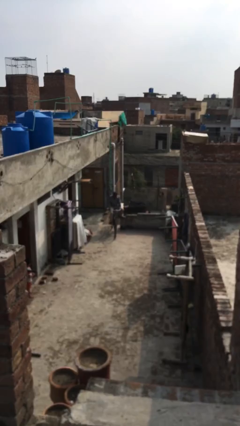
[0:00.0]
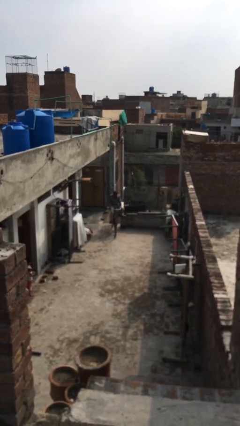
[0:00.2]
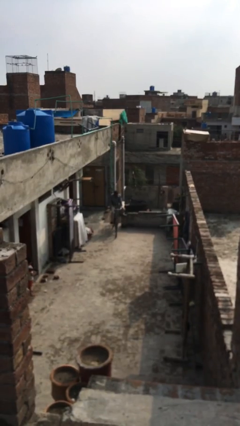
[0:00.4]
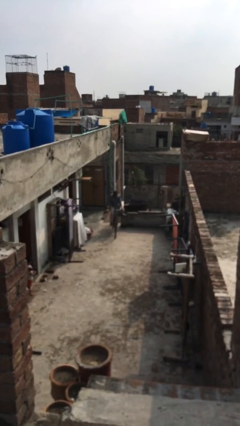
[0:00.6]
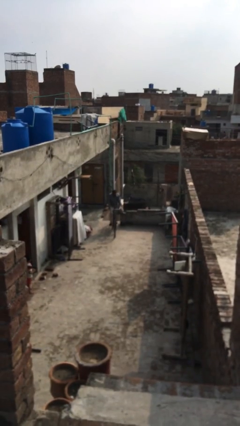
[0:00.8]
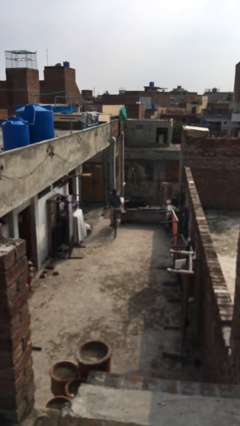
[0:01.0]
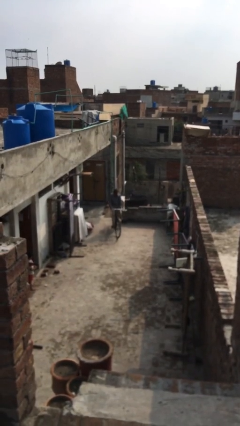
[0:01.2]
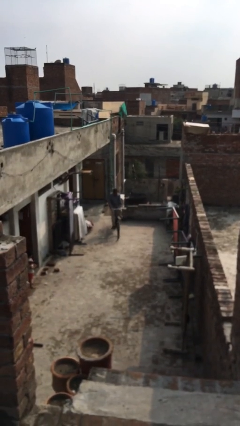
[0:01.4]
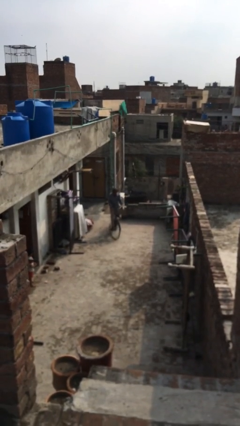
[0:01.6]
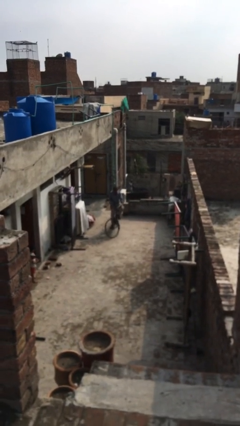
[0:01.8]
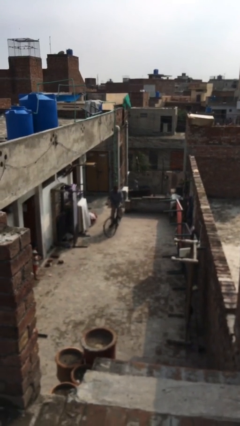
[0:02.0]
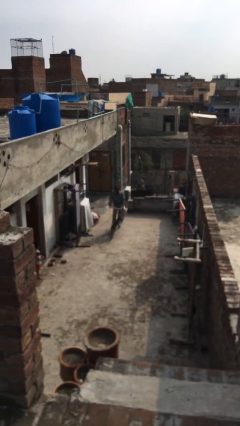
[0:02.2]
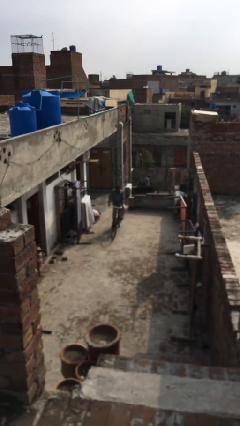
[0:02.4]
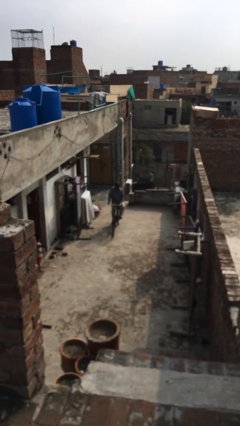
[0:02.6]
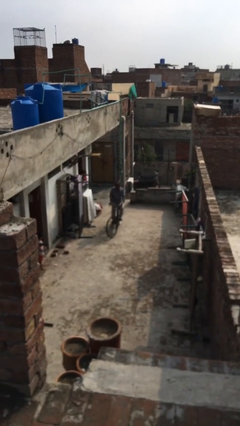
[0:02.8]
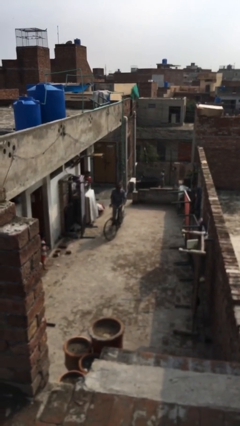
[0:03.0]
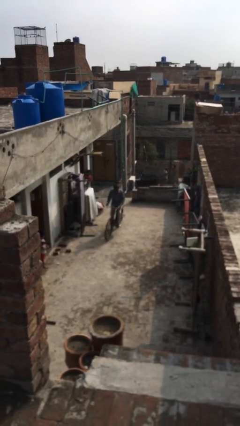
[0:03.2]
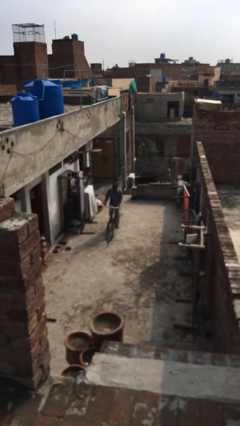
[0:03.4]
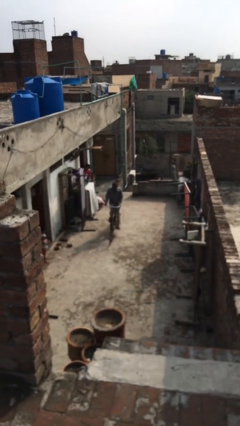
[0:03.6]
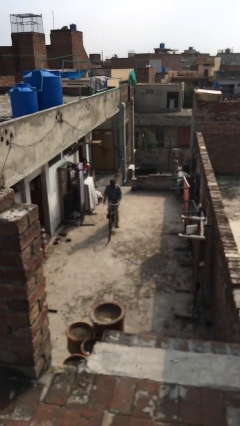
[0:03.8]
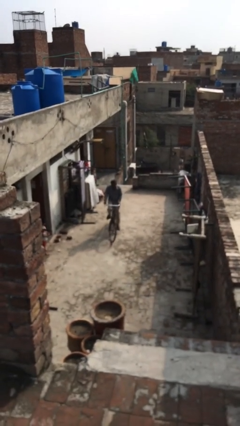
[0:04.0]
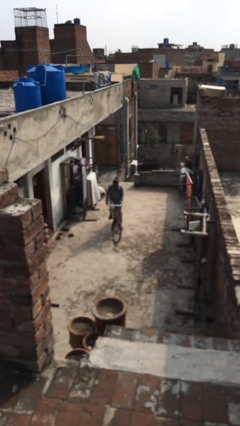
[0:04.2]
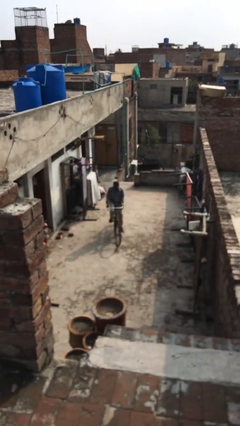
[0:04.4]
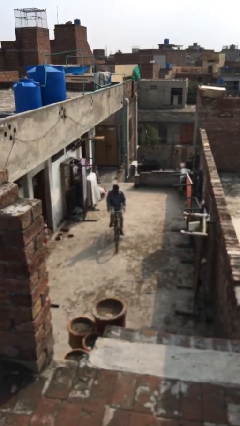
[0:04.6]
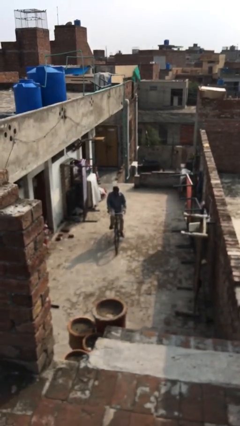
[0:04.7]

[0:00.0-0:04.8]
person rides bicycle

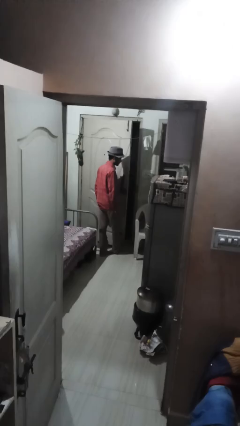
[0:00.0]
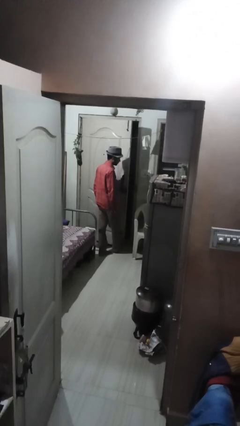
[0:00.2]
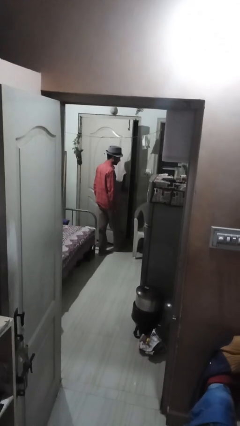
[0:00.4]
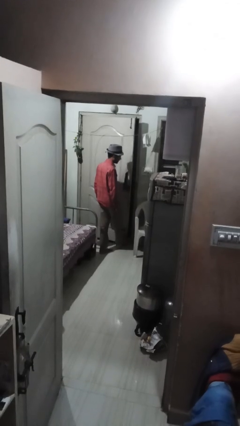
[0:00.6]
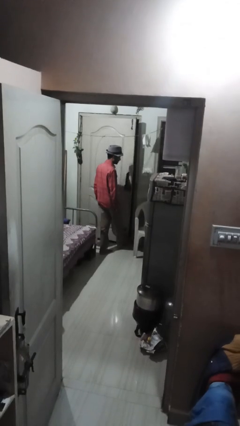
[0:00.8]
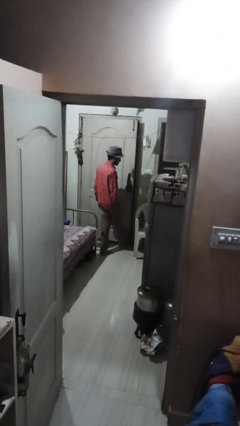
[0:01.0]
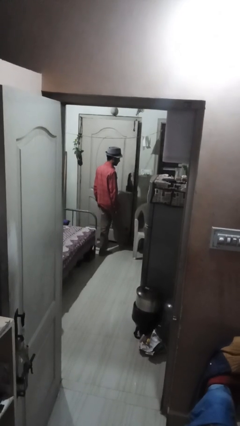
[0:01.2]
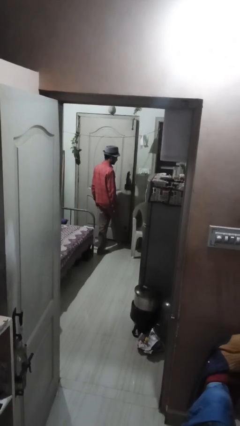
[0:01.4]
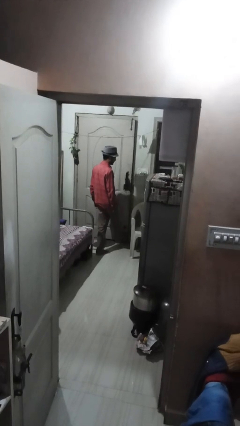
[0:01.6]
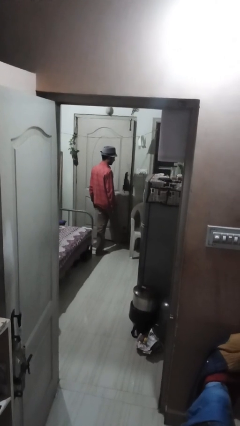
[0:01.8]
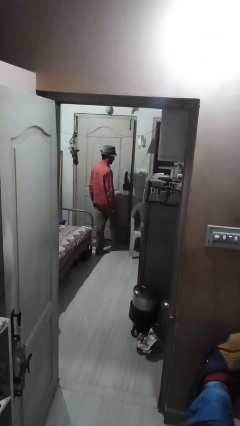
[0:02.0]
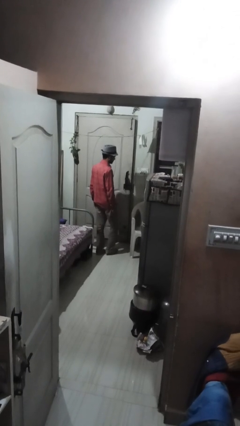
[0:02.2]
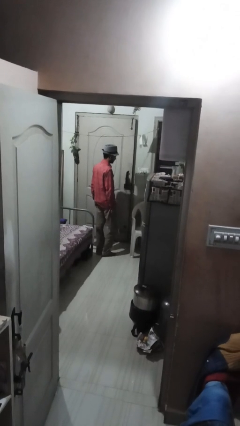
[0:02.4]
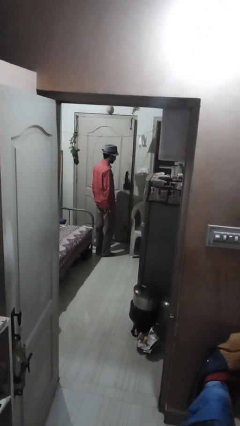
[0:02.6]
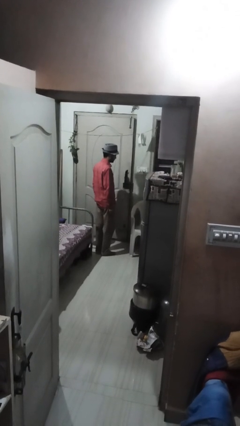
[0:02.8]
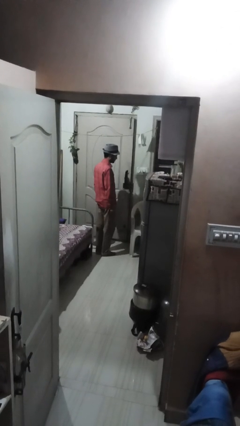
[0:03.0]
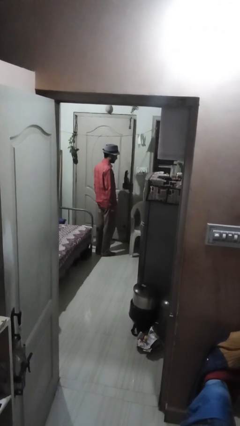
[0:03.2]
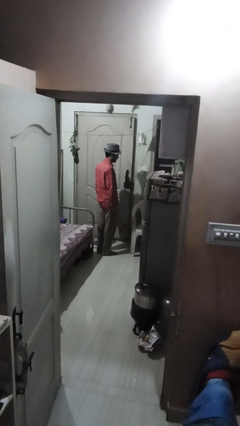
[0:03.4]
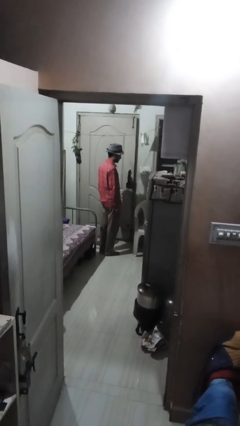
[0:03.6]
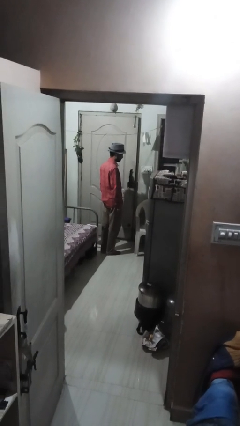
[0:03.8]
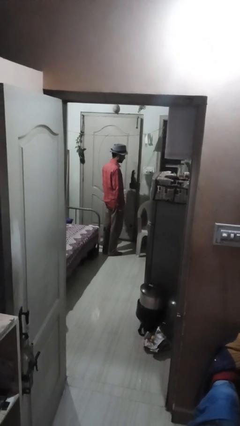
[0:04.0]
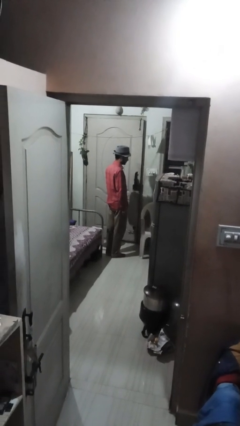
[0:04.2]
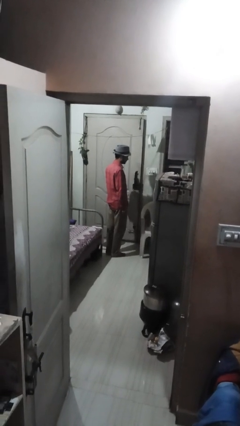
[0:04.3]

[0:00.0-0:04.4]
person closes door with foot

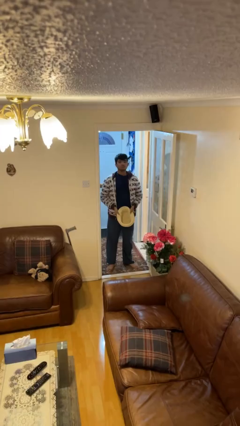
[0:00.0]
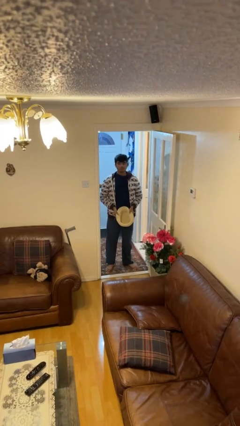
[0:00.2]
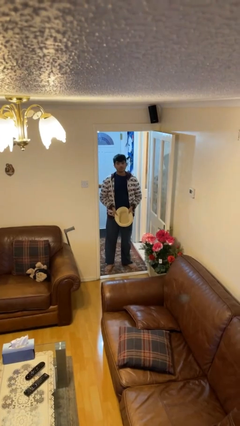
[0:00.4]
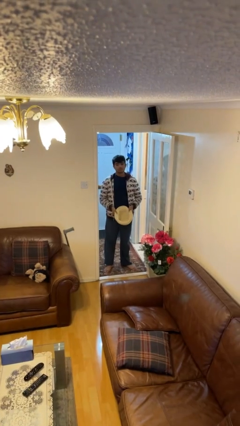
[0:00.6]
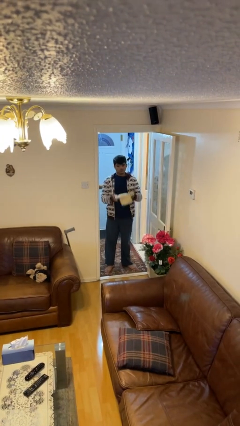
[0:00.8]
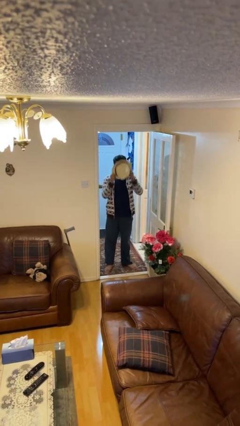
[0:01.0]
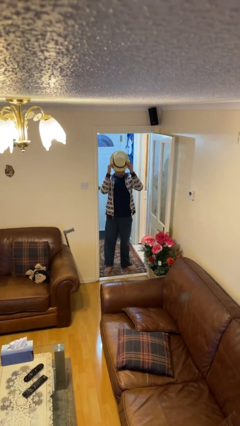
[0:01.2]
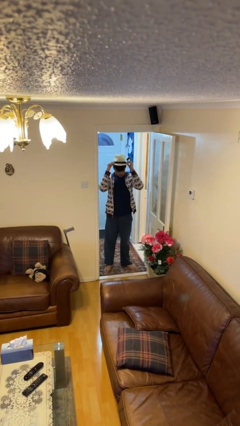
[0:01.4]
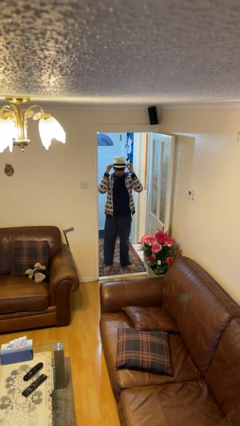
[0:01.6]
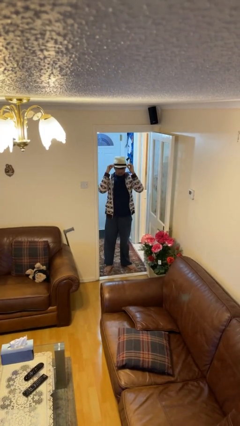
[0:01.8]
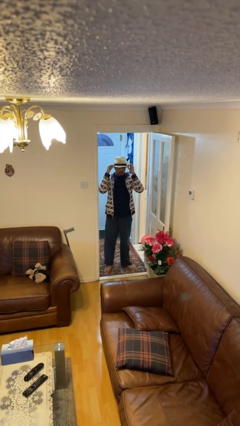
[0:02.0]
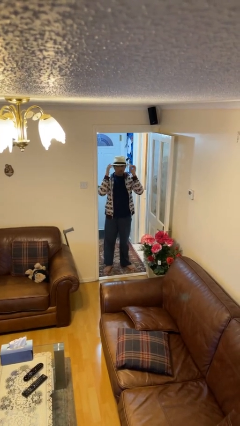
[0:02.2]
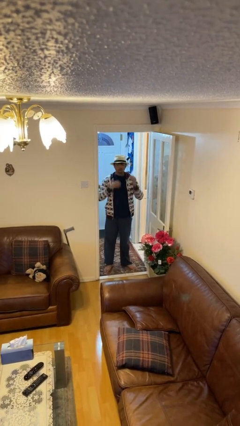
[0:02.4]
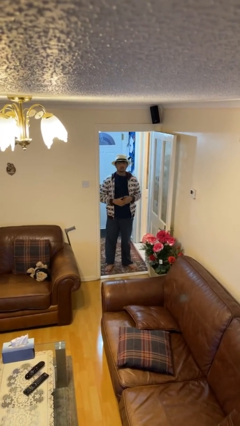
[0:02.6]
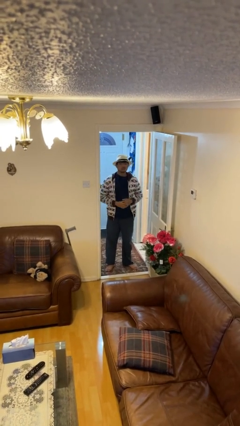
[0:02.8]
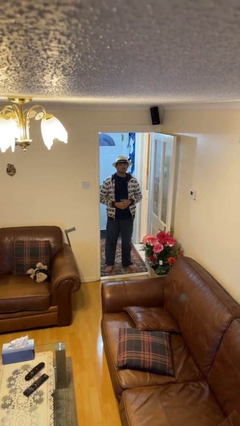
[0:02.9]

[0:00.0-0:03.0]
person puts on hat

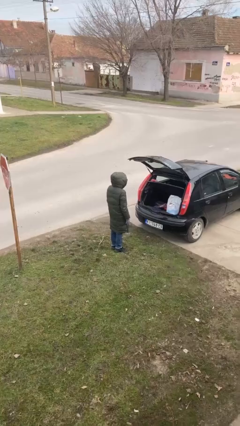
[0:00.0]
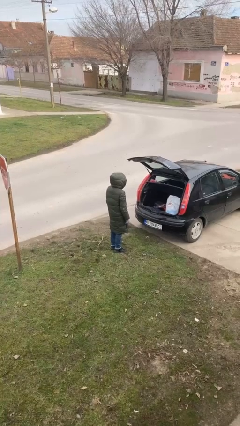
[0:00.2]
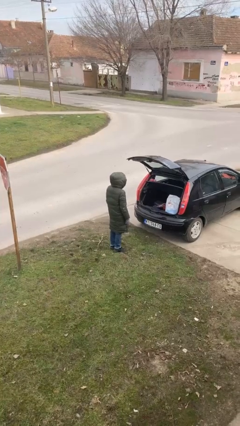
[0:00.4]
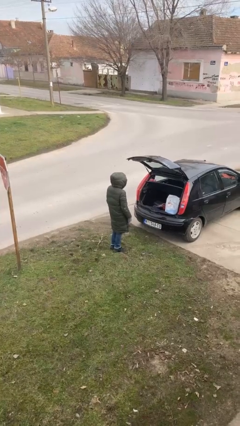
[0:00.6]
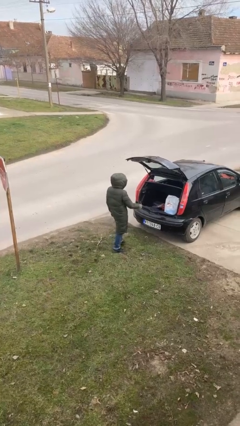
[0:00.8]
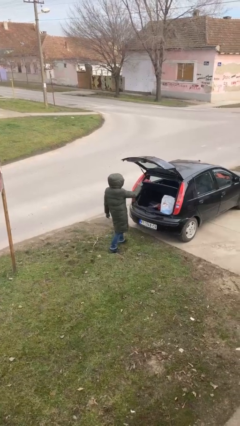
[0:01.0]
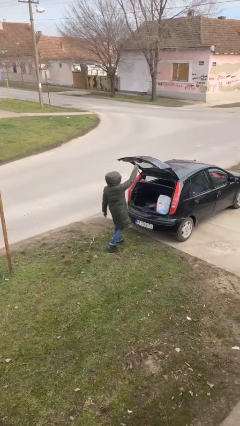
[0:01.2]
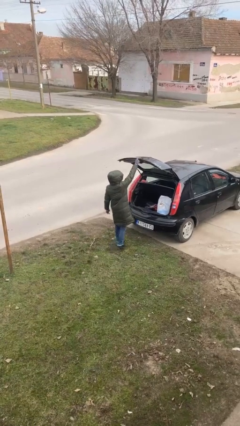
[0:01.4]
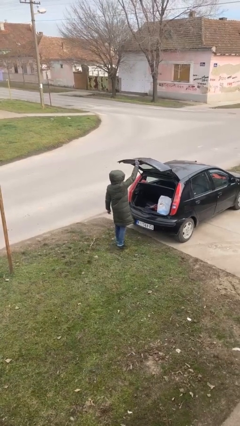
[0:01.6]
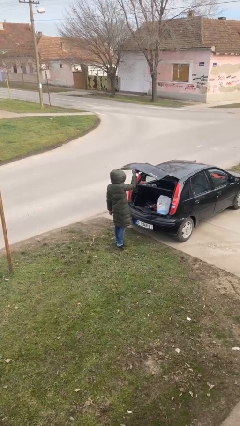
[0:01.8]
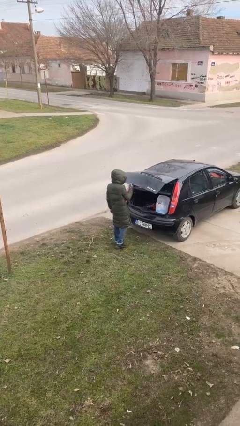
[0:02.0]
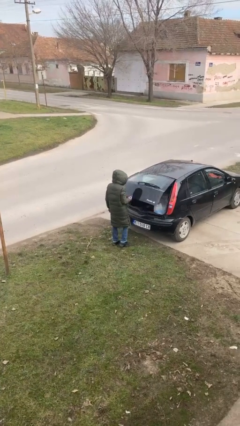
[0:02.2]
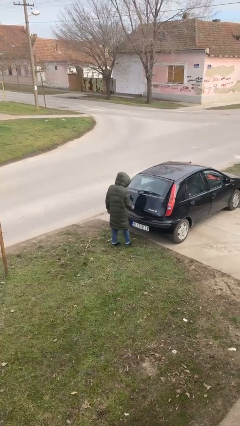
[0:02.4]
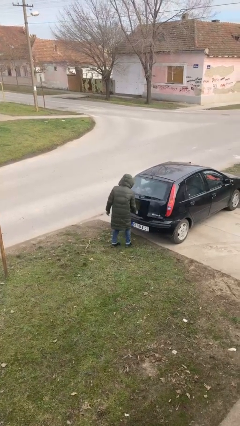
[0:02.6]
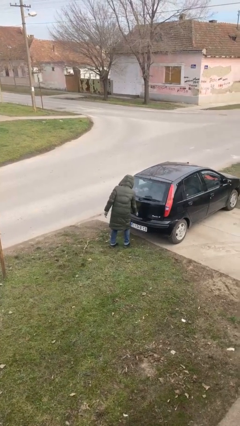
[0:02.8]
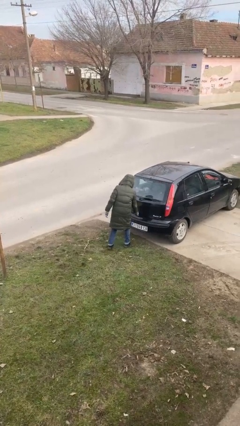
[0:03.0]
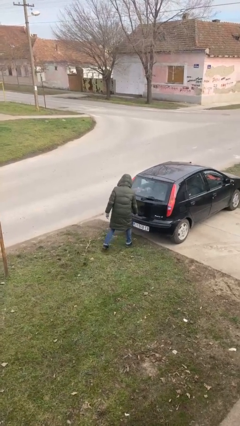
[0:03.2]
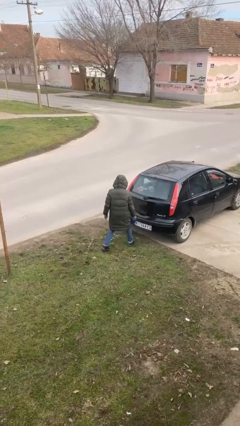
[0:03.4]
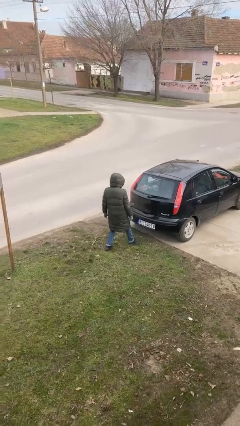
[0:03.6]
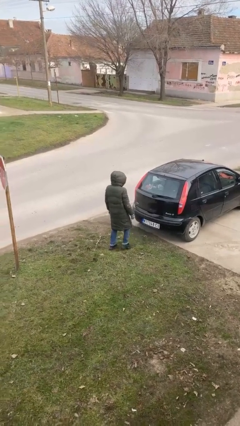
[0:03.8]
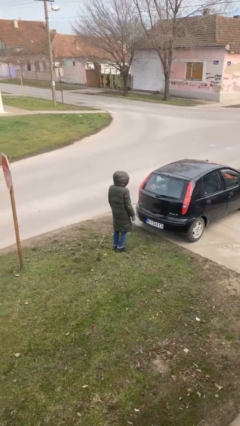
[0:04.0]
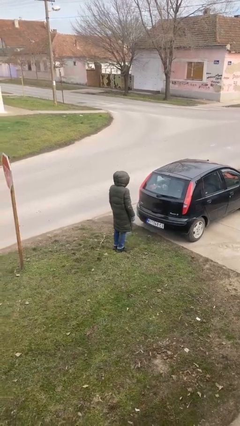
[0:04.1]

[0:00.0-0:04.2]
person closes car trunk

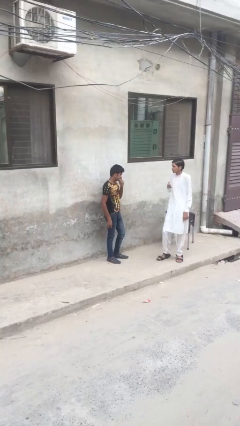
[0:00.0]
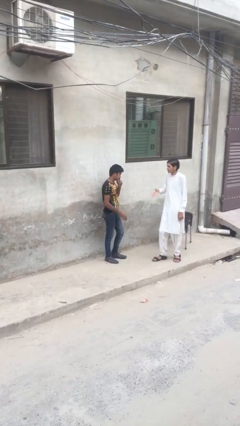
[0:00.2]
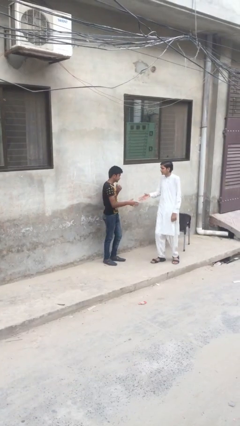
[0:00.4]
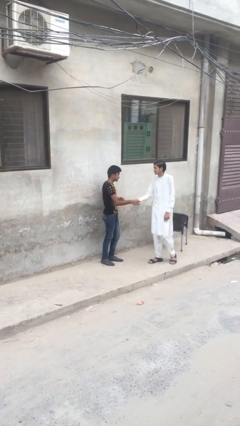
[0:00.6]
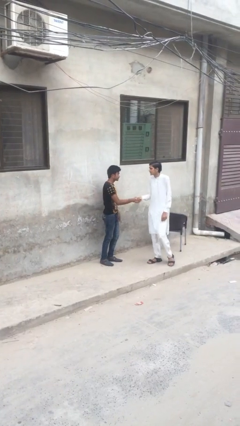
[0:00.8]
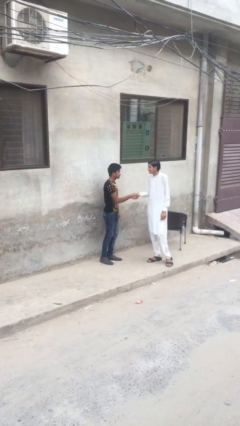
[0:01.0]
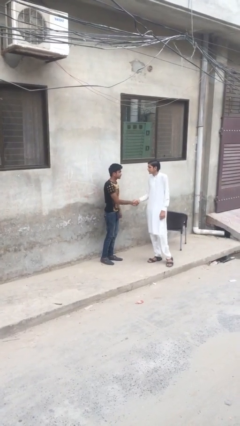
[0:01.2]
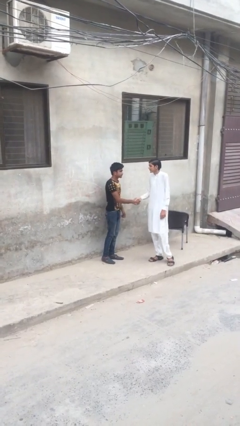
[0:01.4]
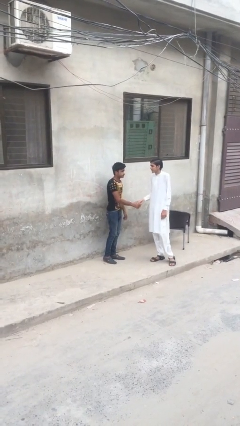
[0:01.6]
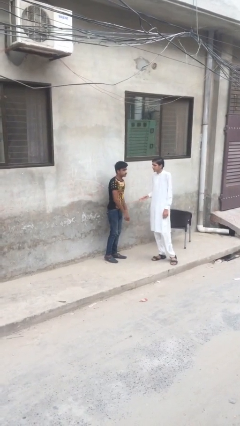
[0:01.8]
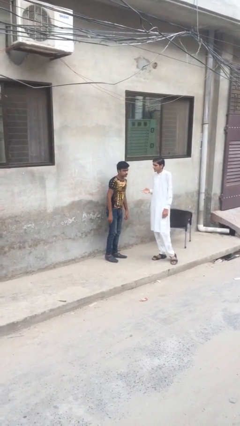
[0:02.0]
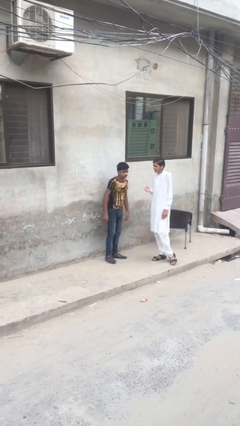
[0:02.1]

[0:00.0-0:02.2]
person shakes hand
